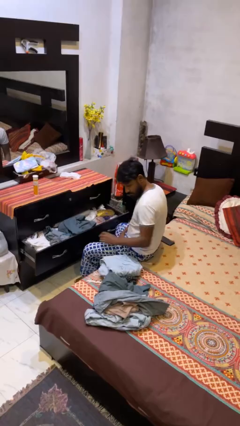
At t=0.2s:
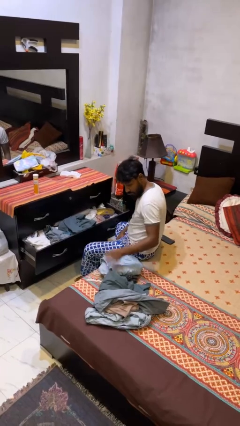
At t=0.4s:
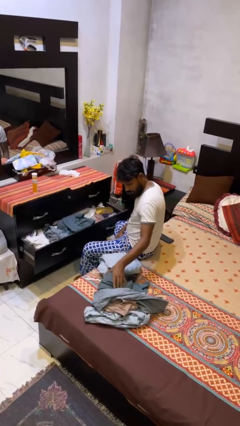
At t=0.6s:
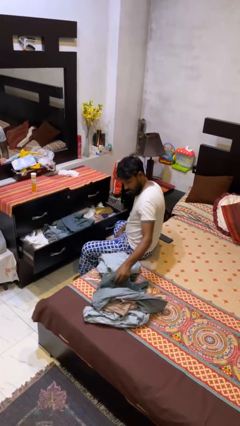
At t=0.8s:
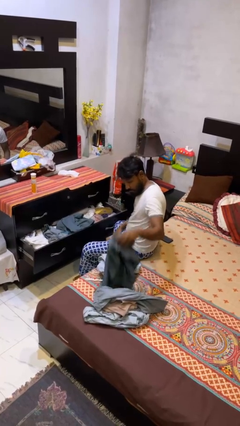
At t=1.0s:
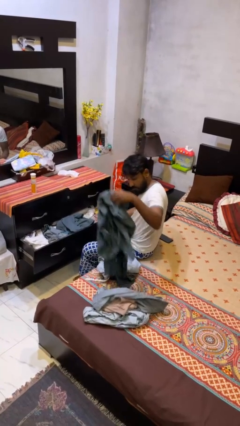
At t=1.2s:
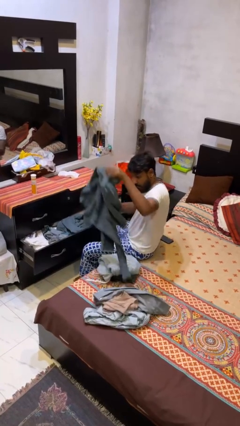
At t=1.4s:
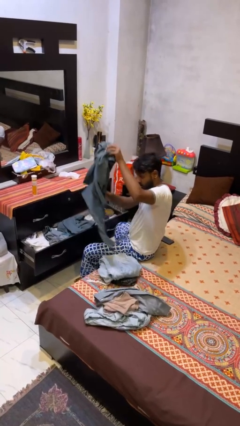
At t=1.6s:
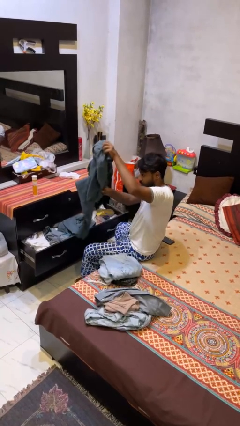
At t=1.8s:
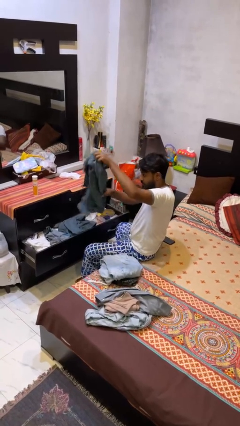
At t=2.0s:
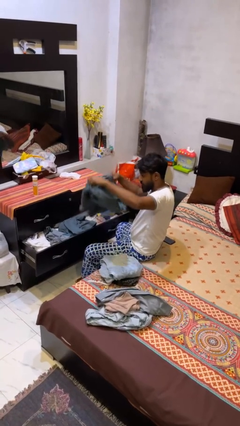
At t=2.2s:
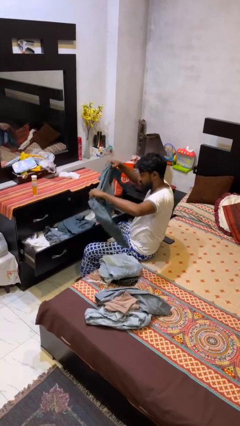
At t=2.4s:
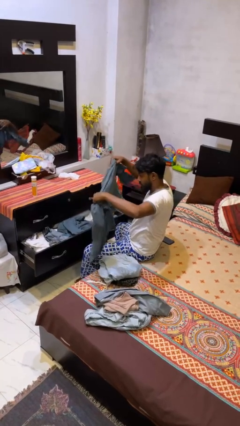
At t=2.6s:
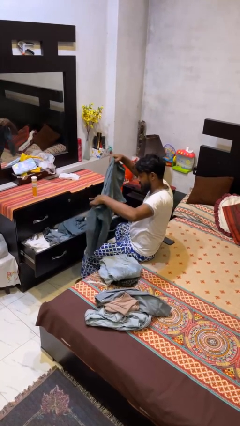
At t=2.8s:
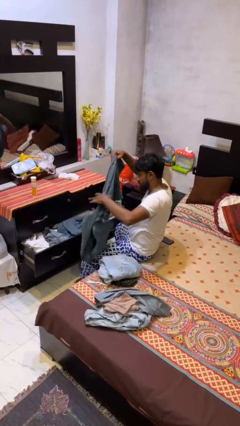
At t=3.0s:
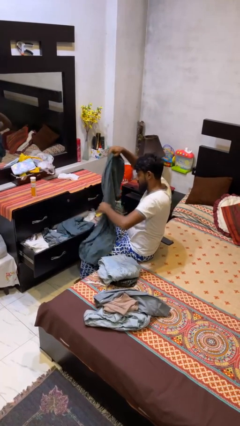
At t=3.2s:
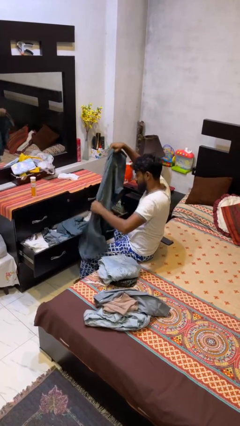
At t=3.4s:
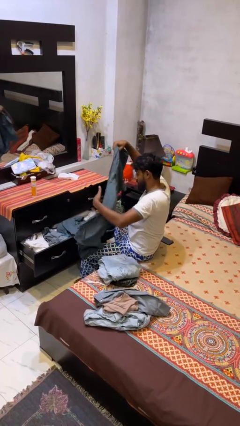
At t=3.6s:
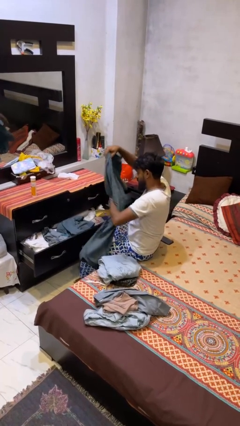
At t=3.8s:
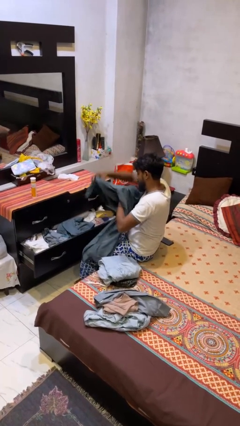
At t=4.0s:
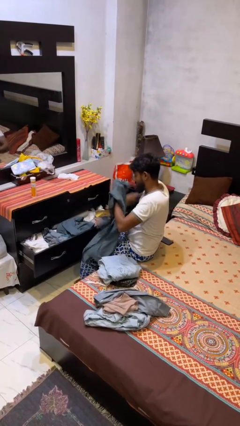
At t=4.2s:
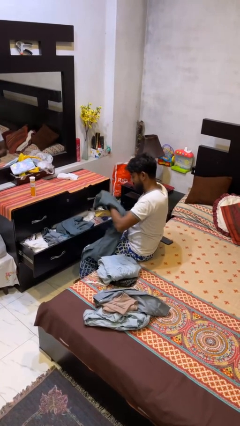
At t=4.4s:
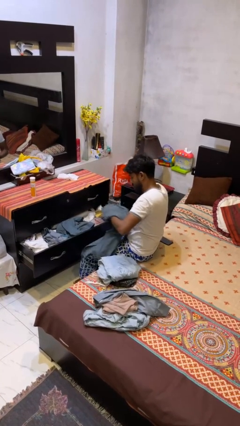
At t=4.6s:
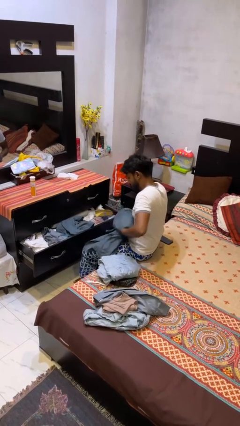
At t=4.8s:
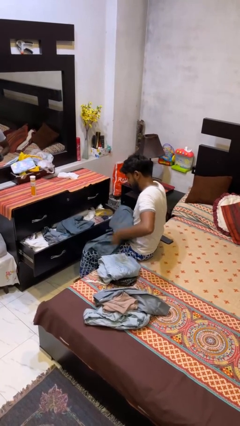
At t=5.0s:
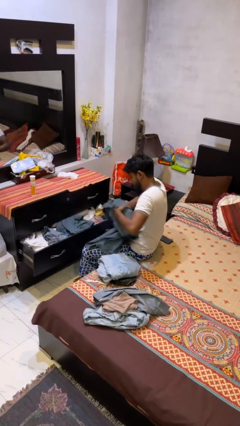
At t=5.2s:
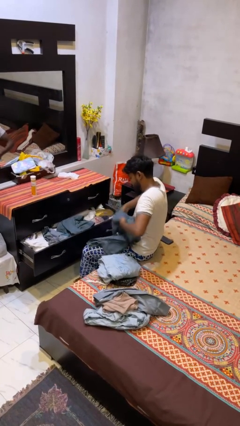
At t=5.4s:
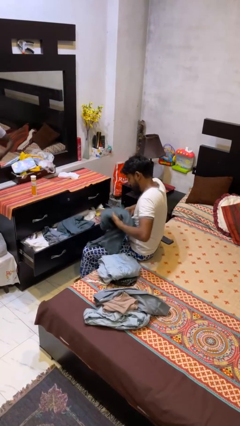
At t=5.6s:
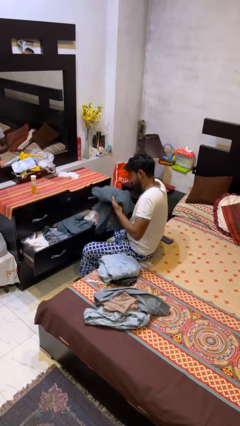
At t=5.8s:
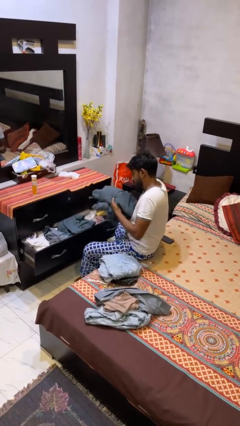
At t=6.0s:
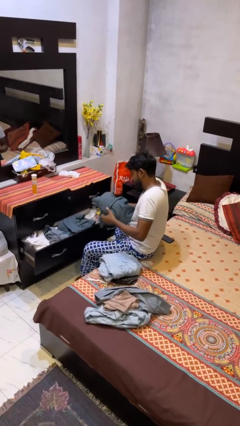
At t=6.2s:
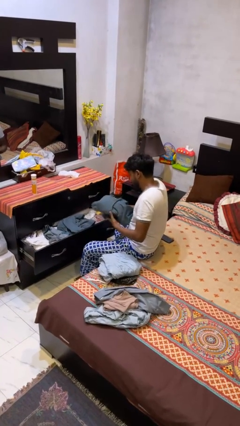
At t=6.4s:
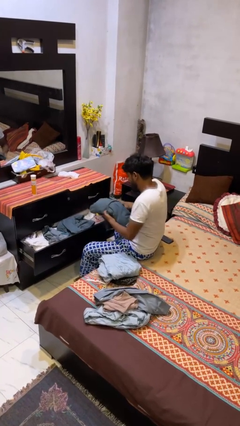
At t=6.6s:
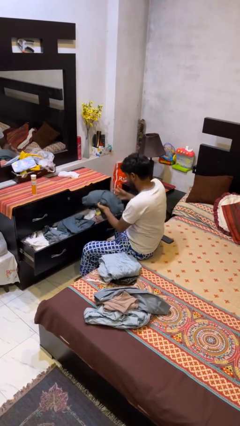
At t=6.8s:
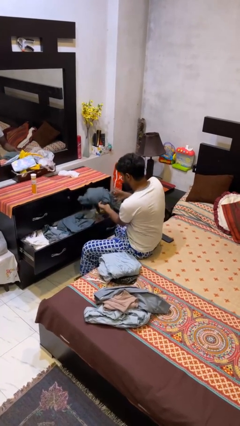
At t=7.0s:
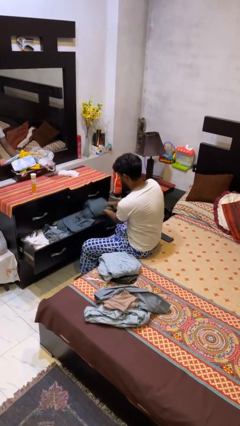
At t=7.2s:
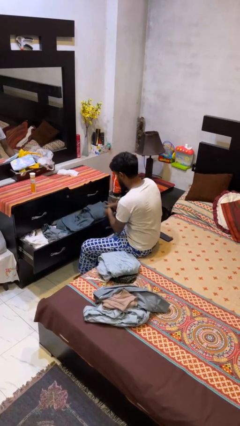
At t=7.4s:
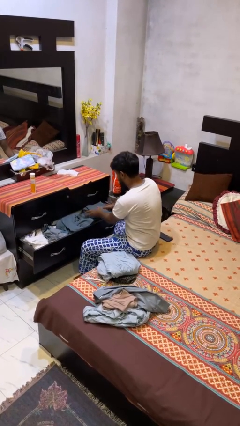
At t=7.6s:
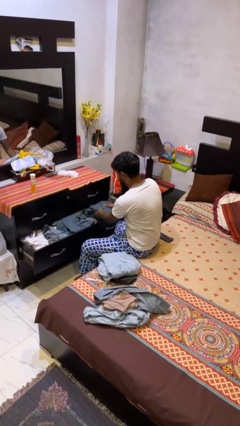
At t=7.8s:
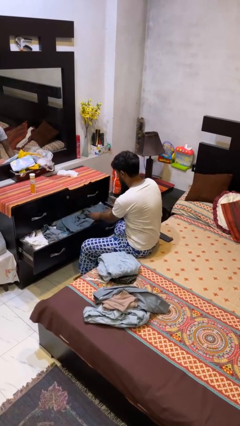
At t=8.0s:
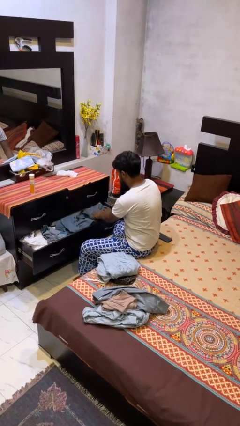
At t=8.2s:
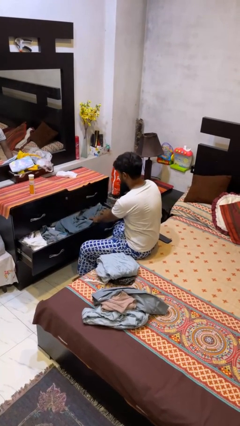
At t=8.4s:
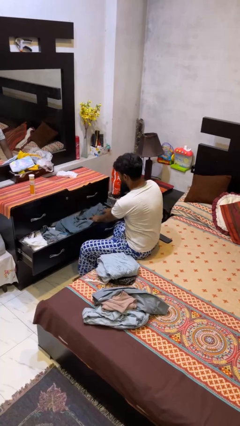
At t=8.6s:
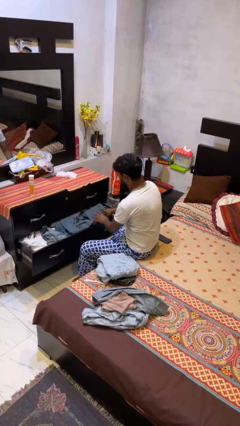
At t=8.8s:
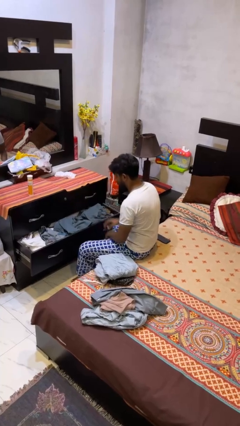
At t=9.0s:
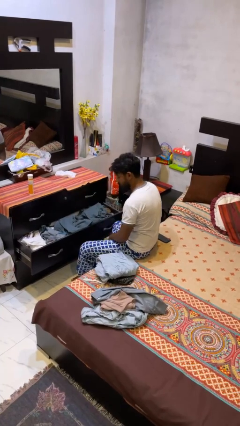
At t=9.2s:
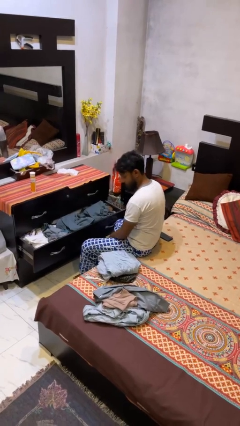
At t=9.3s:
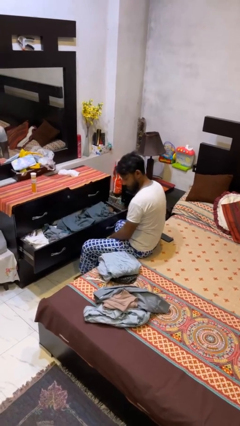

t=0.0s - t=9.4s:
person puts clothes into dresser

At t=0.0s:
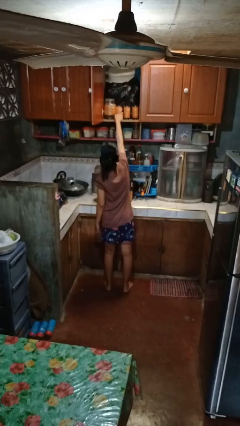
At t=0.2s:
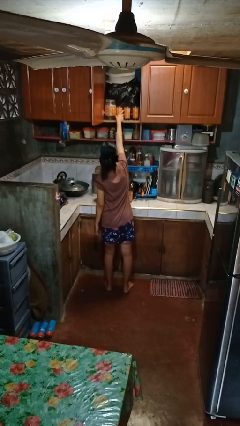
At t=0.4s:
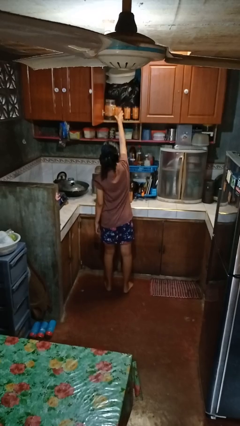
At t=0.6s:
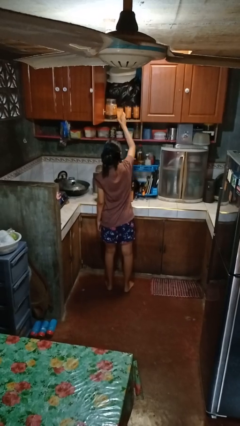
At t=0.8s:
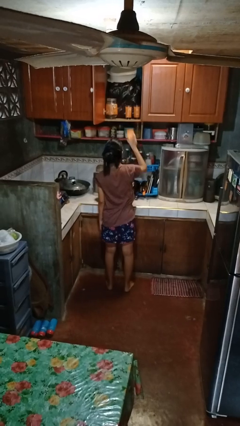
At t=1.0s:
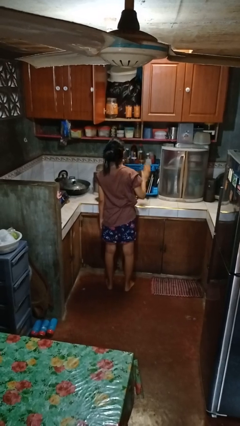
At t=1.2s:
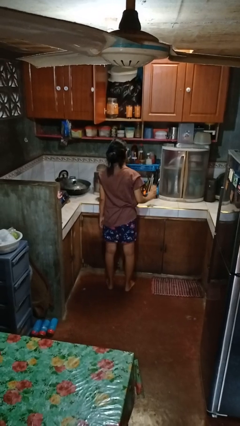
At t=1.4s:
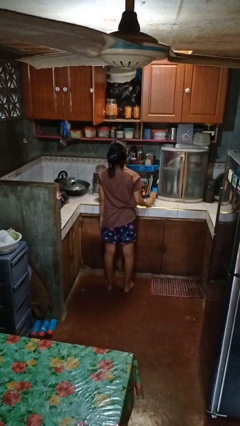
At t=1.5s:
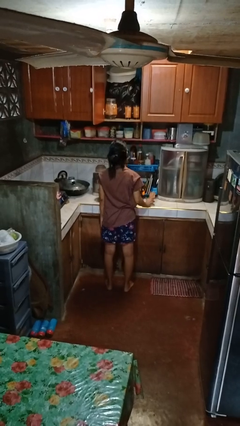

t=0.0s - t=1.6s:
person takes object from cabinet

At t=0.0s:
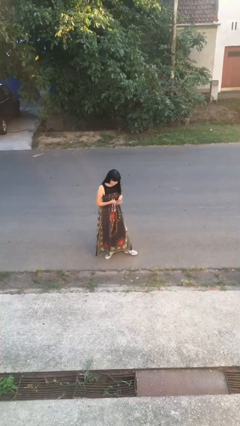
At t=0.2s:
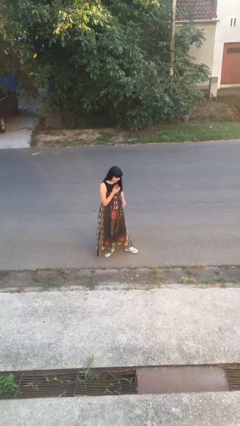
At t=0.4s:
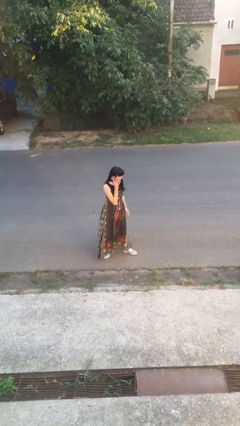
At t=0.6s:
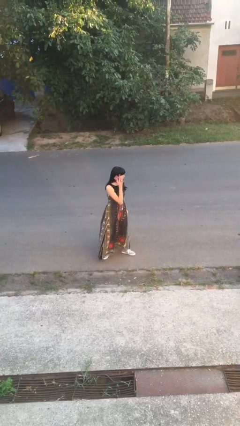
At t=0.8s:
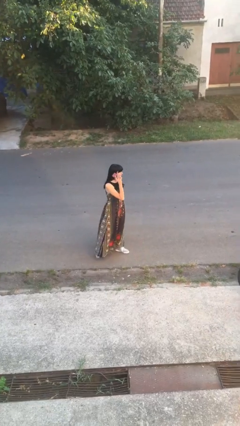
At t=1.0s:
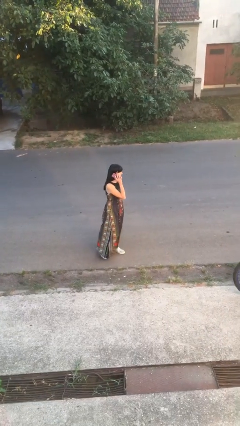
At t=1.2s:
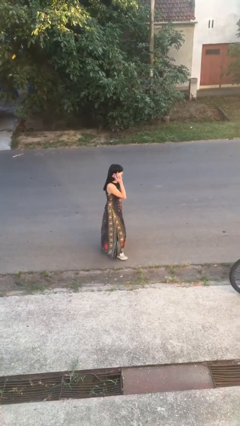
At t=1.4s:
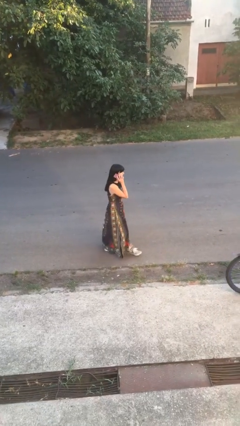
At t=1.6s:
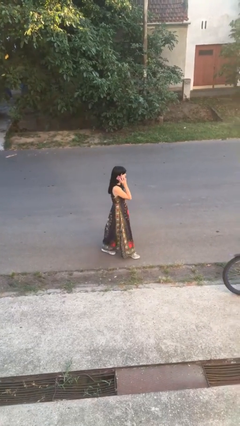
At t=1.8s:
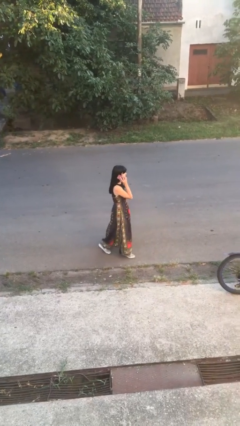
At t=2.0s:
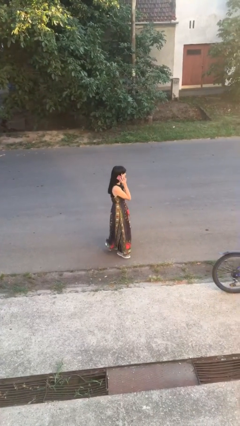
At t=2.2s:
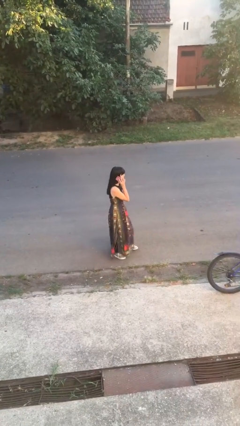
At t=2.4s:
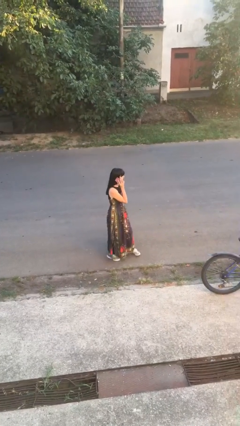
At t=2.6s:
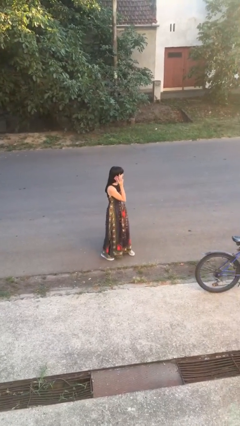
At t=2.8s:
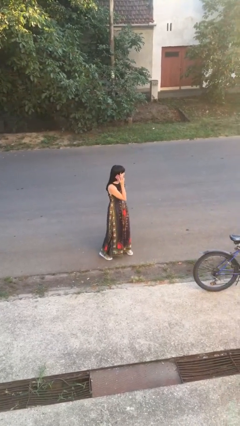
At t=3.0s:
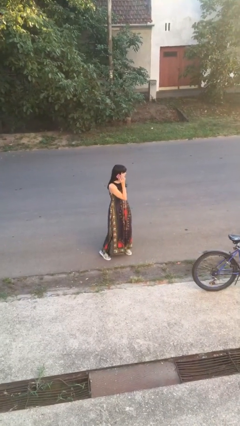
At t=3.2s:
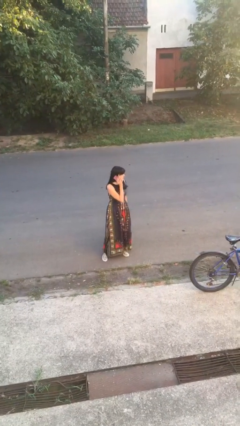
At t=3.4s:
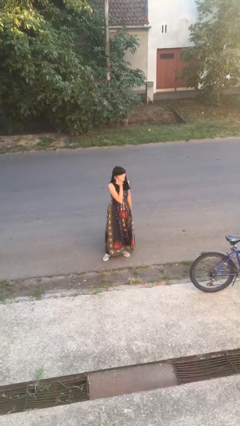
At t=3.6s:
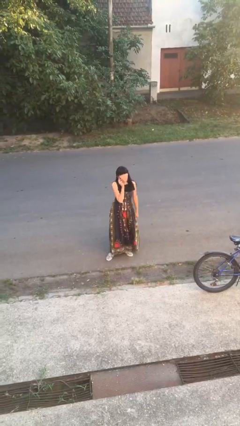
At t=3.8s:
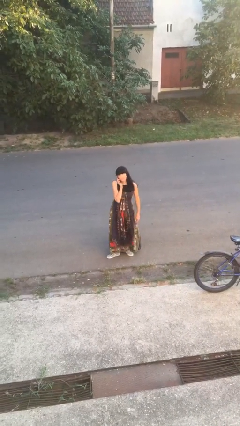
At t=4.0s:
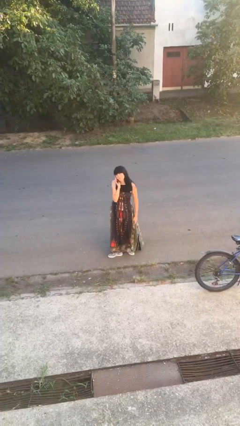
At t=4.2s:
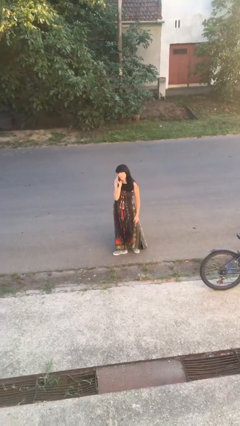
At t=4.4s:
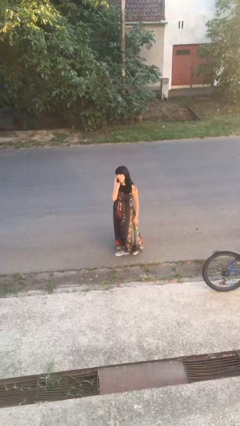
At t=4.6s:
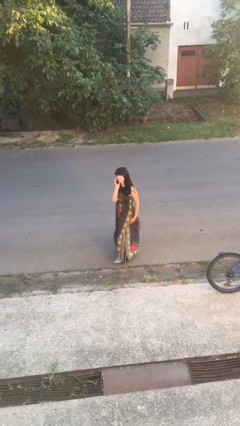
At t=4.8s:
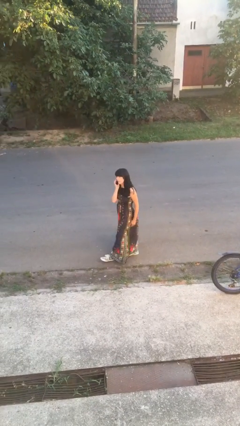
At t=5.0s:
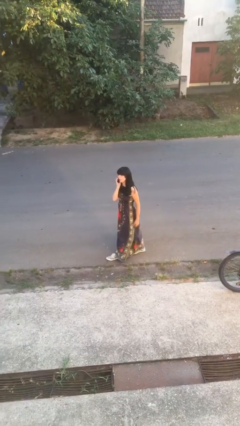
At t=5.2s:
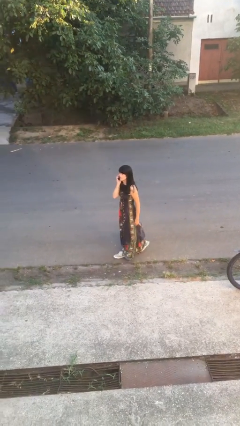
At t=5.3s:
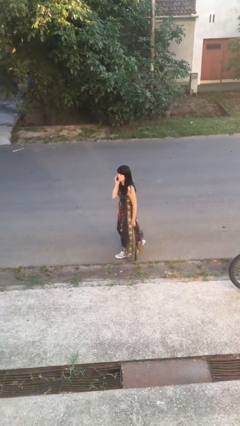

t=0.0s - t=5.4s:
person talks on phone

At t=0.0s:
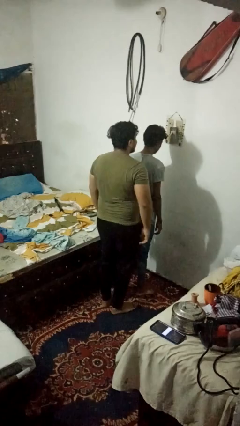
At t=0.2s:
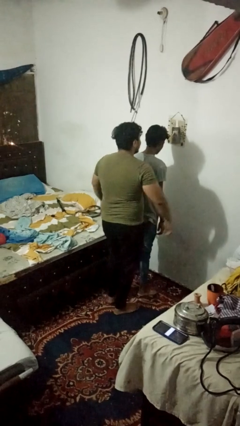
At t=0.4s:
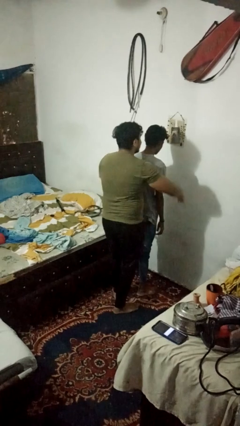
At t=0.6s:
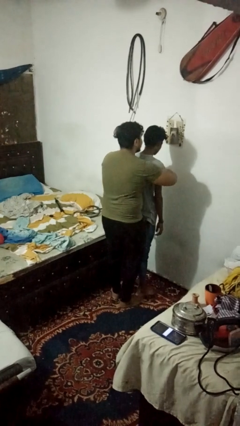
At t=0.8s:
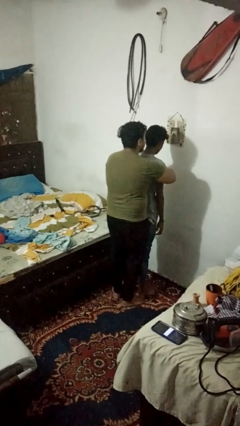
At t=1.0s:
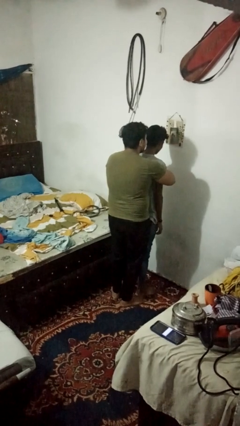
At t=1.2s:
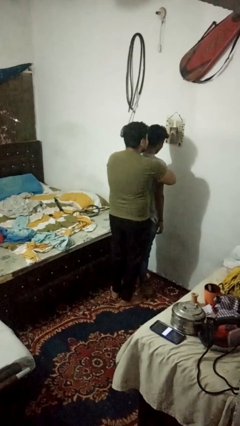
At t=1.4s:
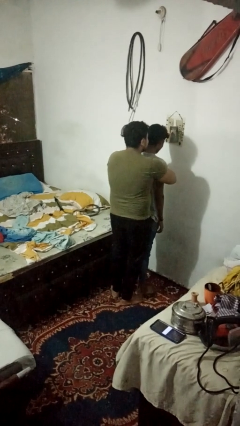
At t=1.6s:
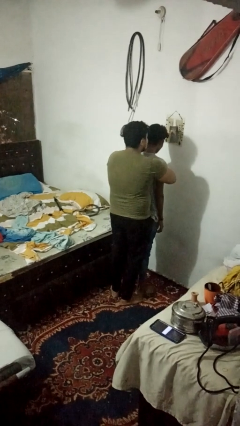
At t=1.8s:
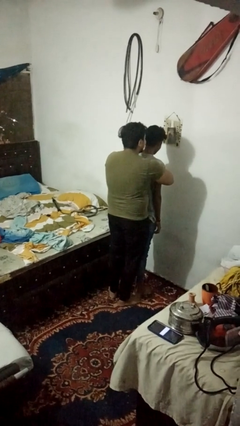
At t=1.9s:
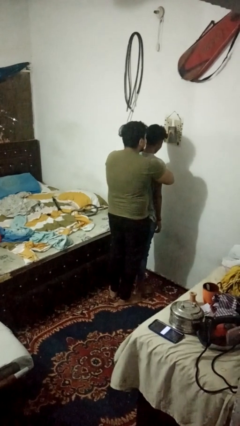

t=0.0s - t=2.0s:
person hugs person from behind
